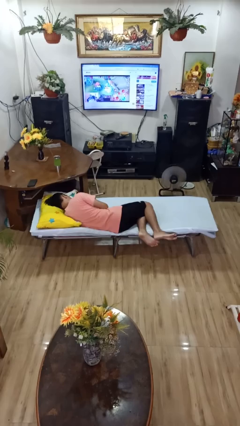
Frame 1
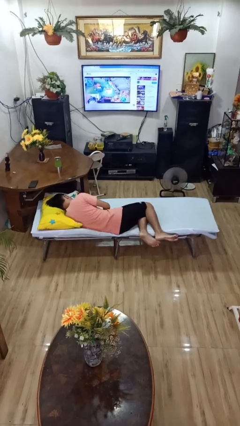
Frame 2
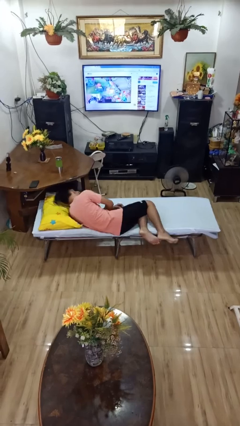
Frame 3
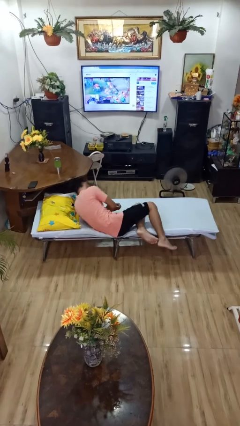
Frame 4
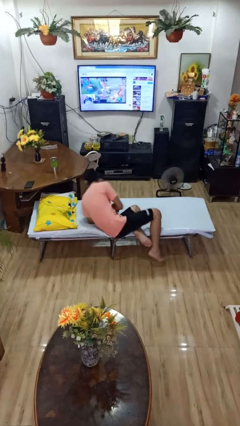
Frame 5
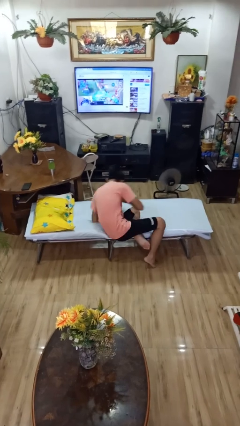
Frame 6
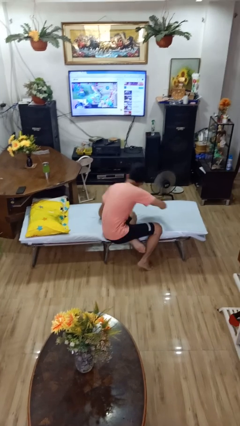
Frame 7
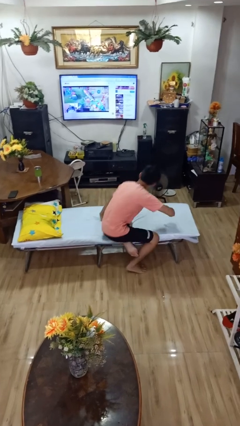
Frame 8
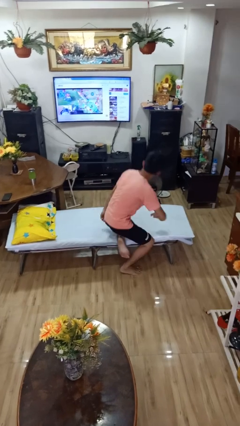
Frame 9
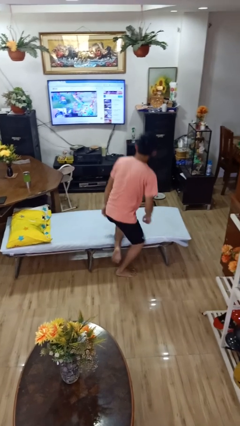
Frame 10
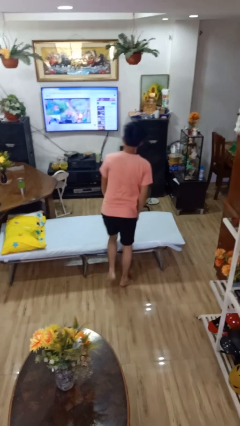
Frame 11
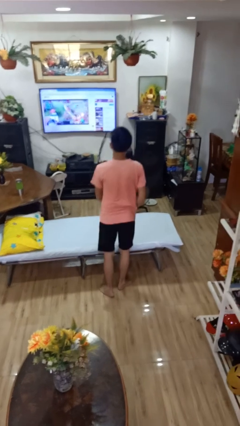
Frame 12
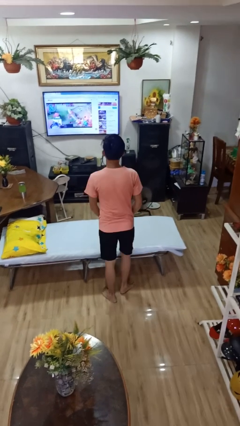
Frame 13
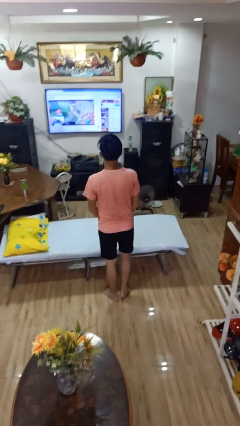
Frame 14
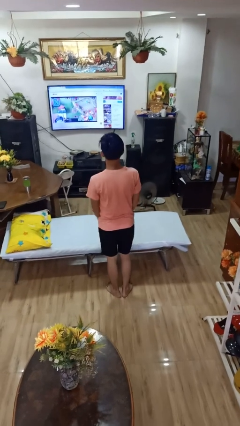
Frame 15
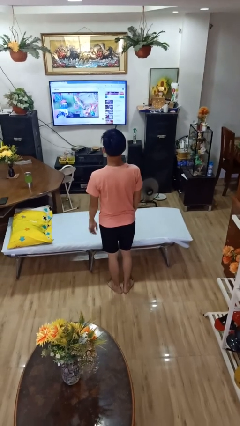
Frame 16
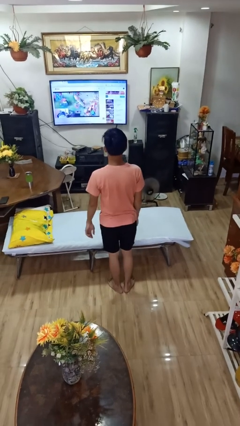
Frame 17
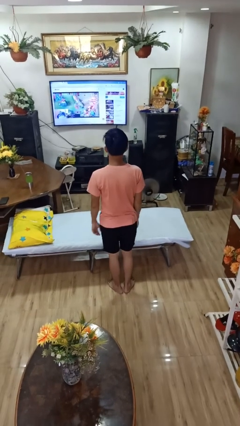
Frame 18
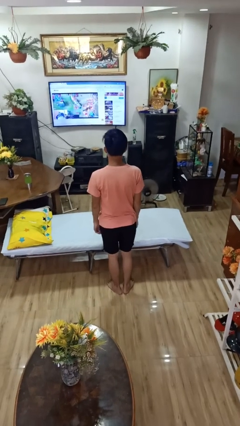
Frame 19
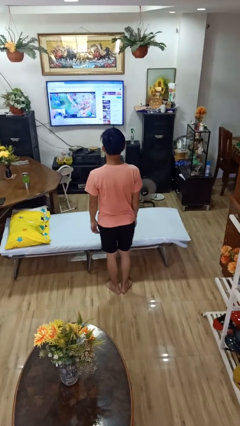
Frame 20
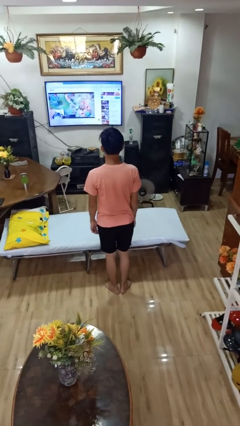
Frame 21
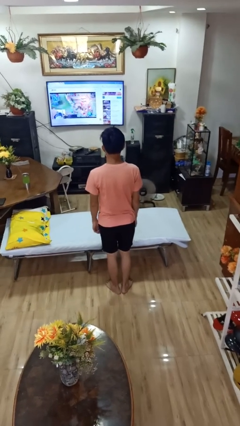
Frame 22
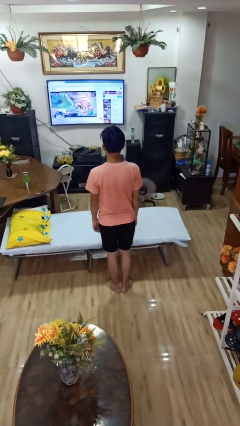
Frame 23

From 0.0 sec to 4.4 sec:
person stands up

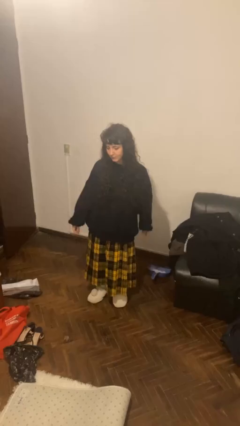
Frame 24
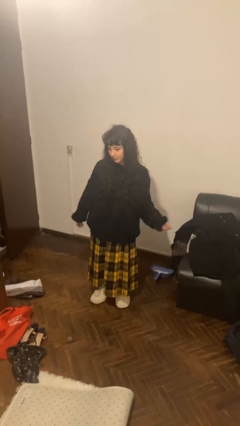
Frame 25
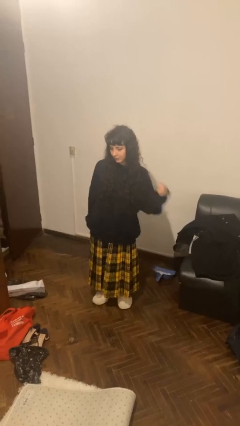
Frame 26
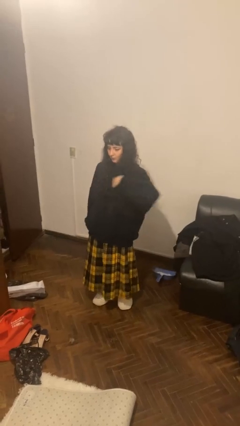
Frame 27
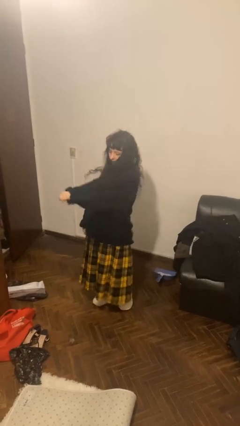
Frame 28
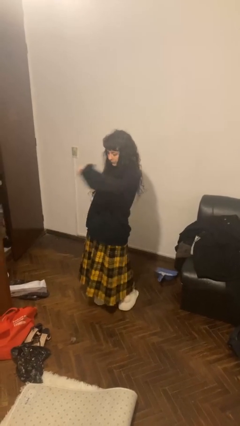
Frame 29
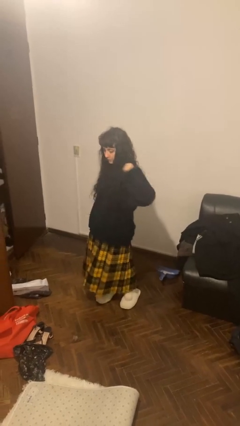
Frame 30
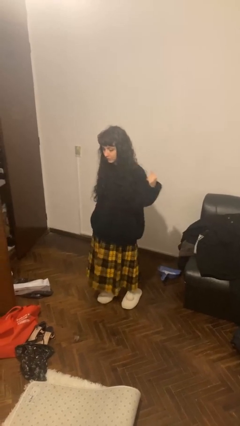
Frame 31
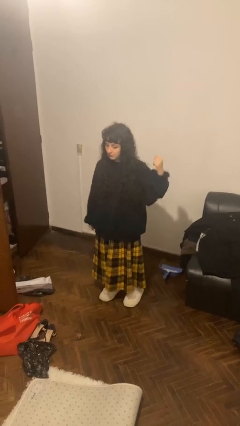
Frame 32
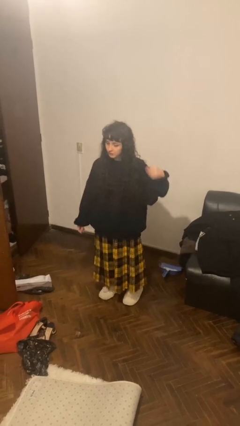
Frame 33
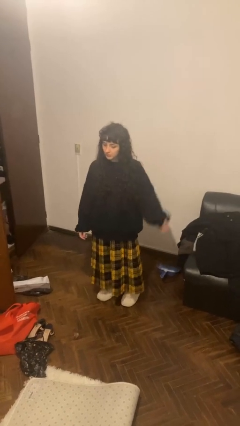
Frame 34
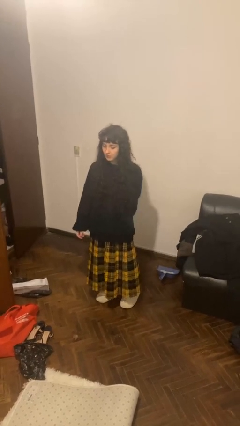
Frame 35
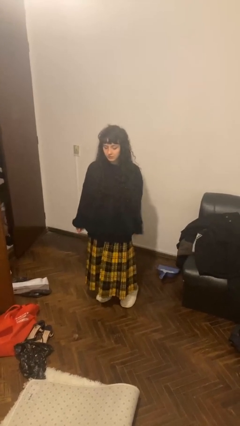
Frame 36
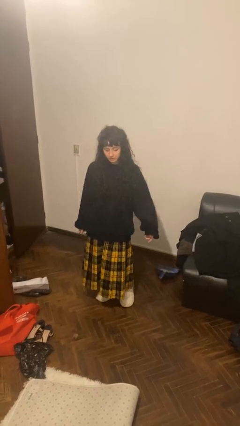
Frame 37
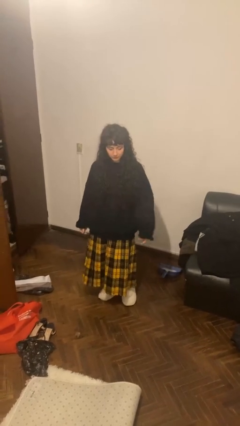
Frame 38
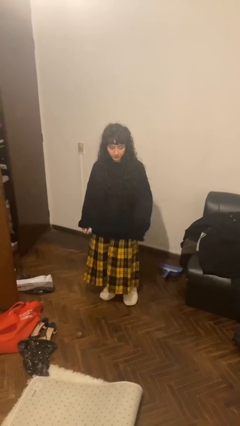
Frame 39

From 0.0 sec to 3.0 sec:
person punches

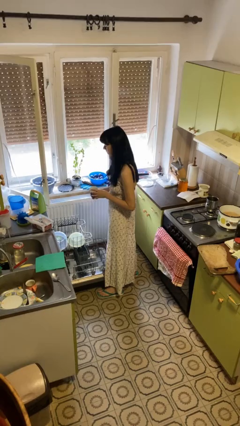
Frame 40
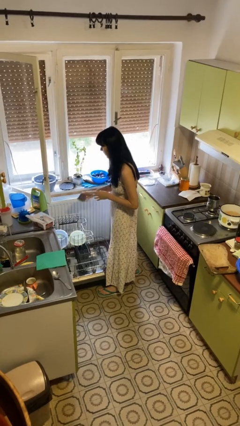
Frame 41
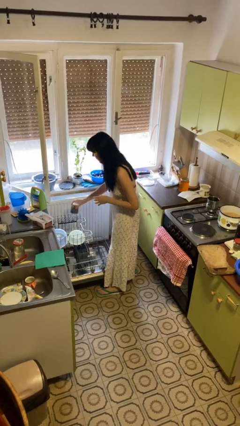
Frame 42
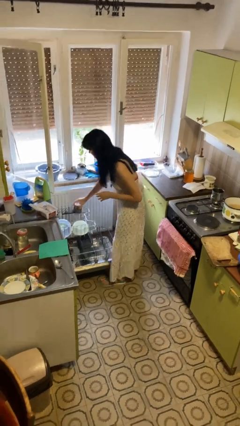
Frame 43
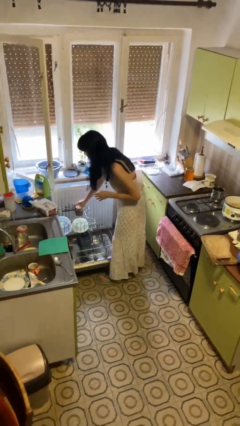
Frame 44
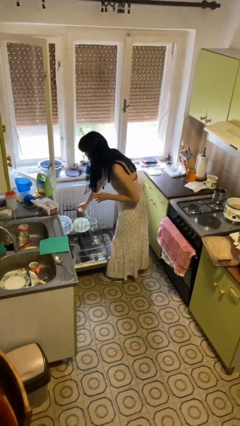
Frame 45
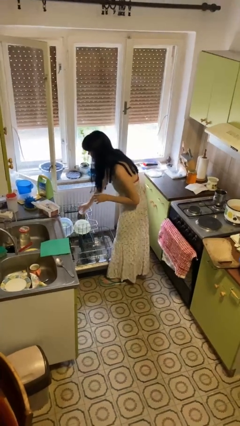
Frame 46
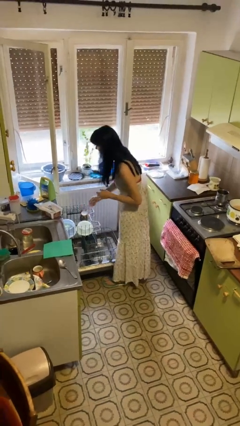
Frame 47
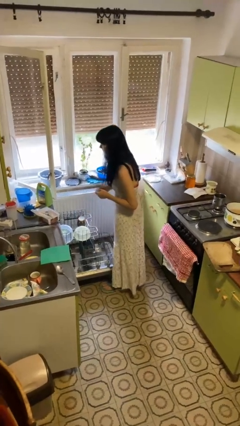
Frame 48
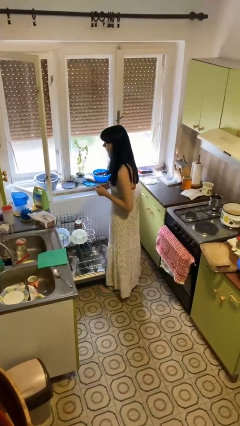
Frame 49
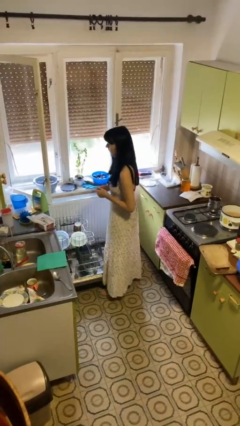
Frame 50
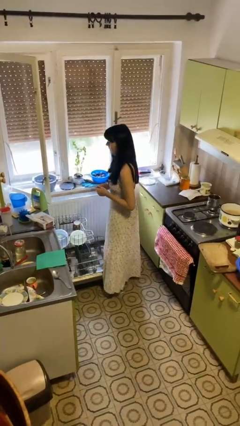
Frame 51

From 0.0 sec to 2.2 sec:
person loads dishwasher

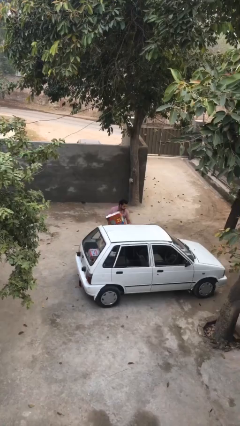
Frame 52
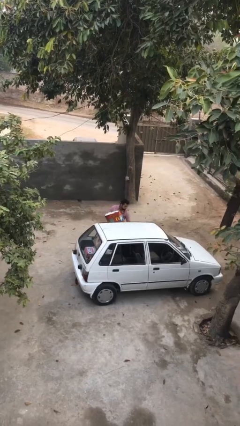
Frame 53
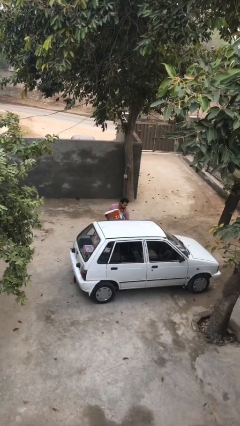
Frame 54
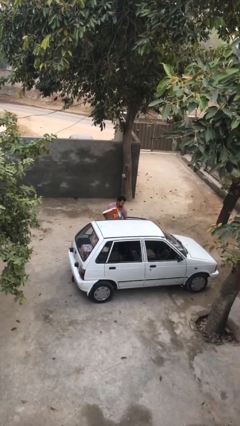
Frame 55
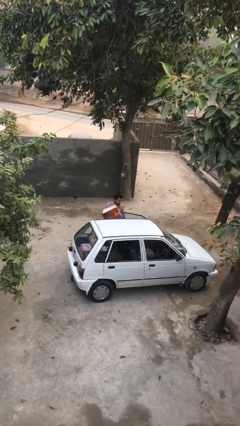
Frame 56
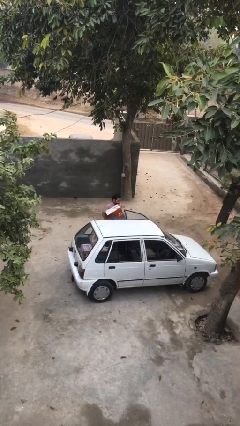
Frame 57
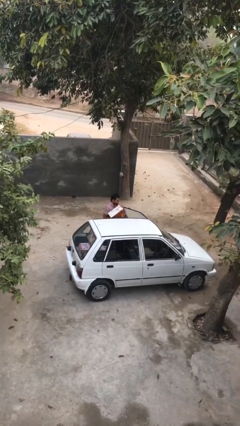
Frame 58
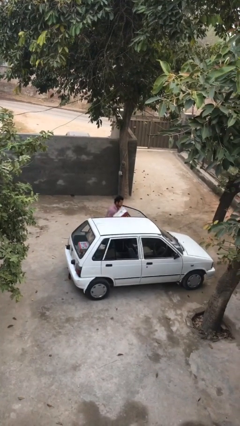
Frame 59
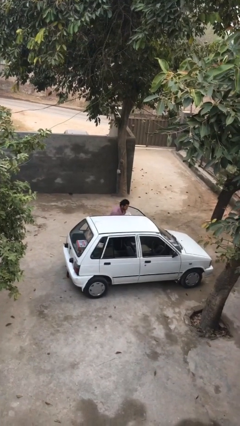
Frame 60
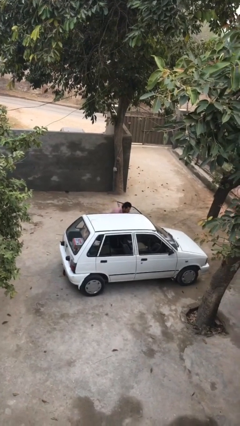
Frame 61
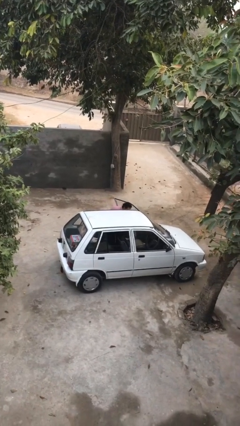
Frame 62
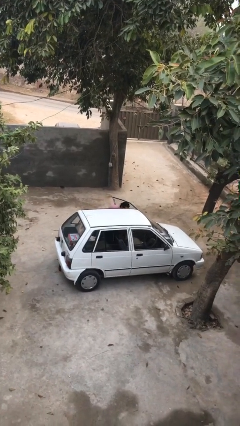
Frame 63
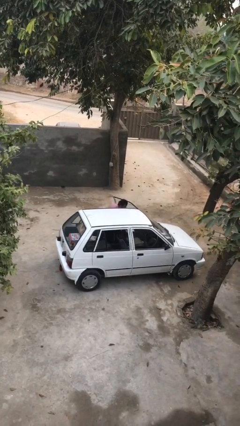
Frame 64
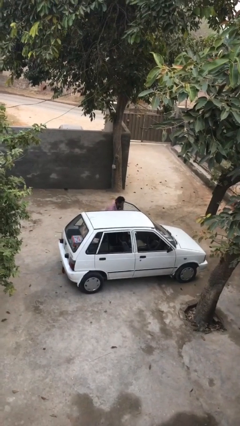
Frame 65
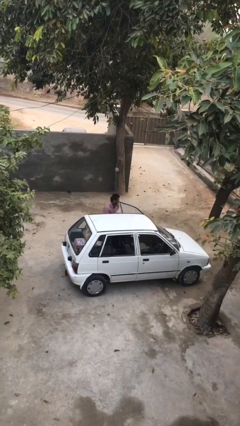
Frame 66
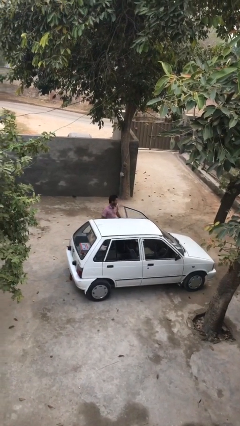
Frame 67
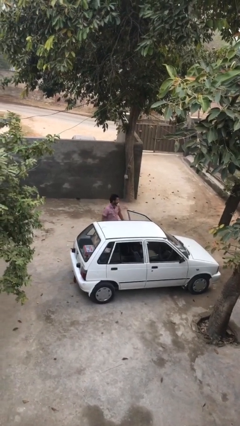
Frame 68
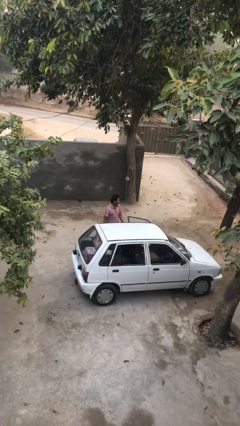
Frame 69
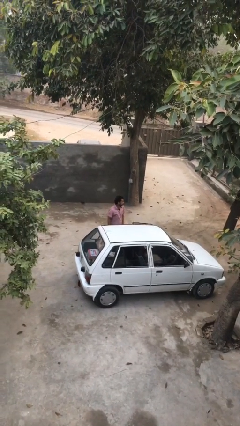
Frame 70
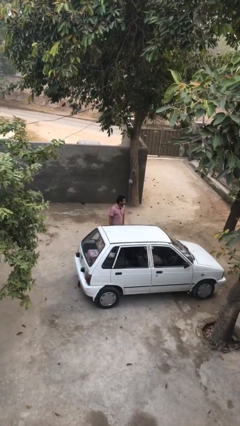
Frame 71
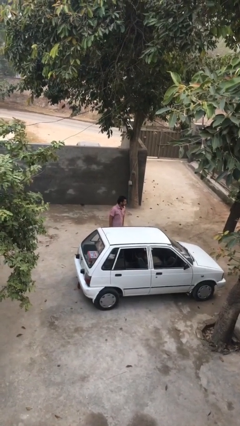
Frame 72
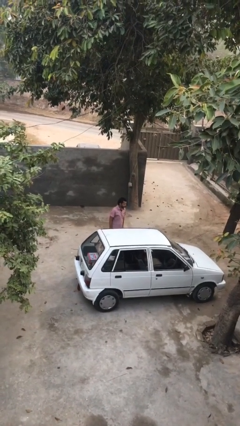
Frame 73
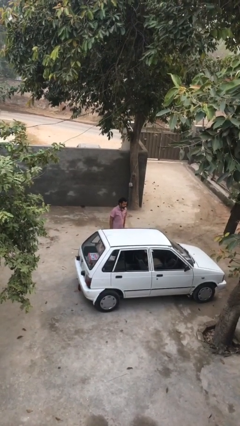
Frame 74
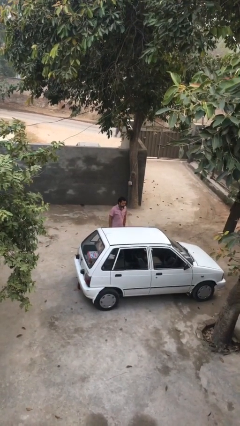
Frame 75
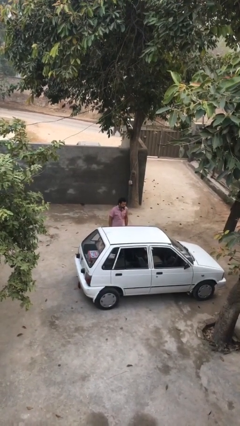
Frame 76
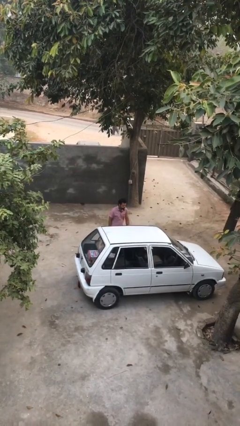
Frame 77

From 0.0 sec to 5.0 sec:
person loads car

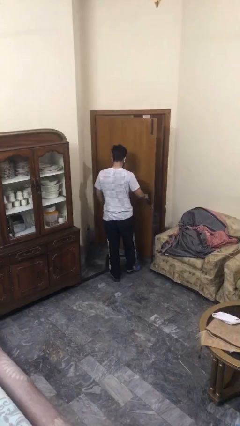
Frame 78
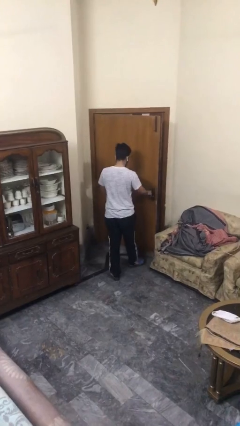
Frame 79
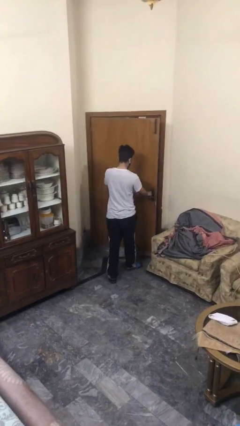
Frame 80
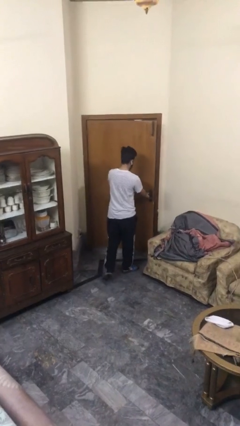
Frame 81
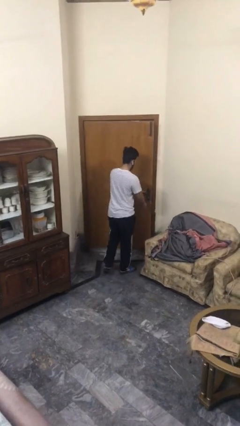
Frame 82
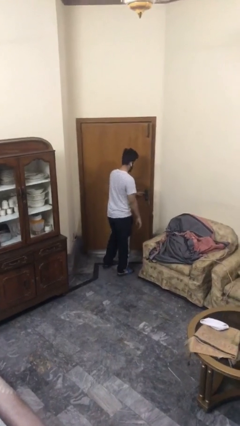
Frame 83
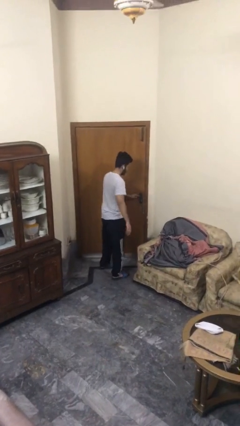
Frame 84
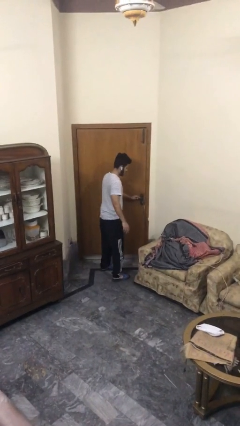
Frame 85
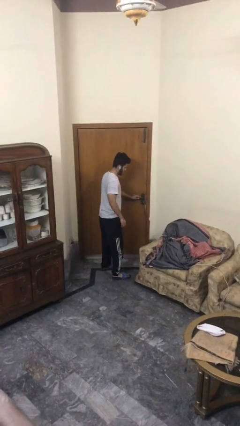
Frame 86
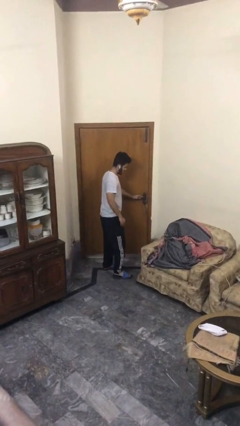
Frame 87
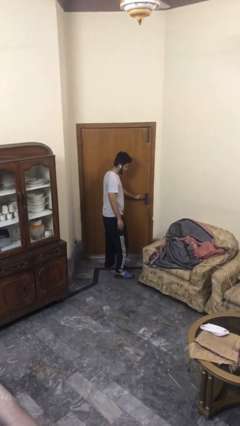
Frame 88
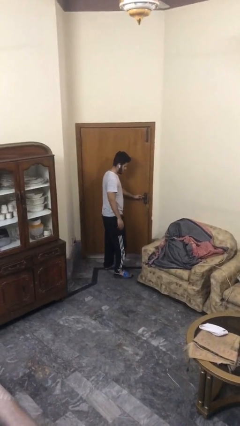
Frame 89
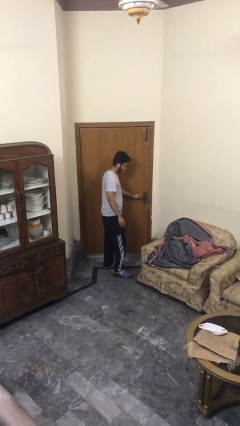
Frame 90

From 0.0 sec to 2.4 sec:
person closes facility door

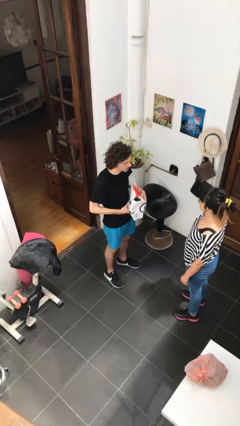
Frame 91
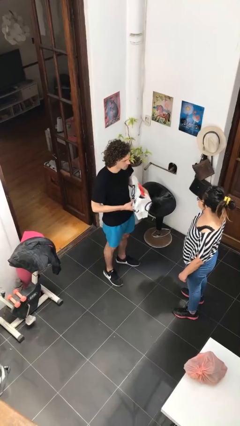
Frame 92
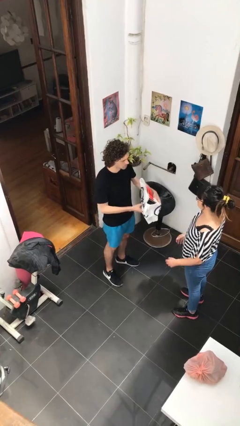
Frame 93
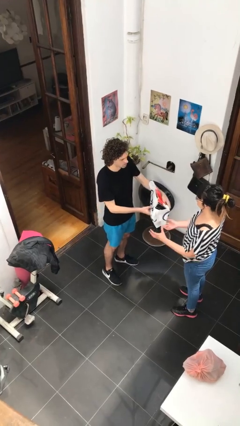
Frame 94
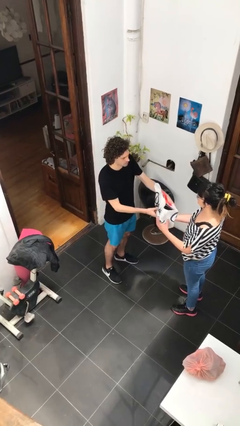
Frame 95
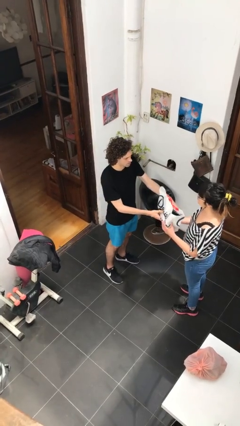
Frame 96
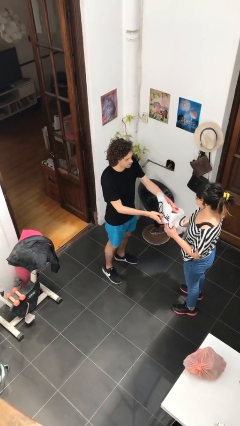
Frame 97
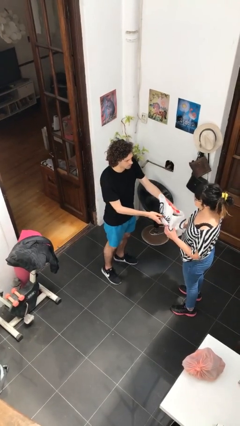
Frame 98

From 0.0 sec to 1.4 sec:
person transfers object to person
